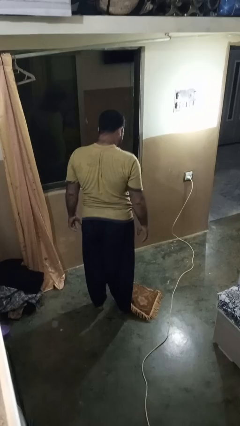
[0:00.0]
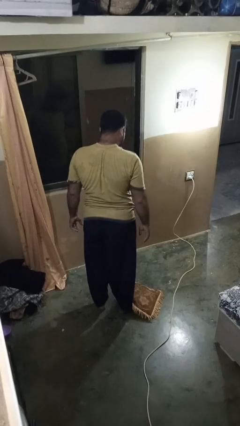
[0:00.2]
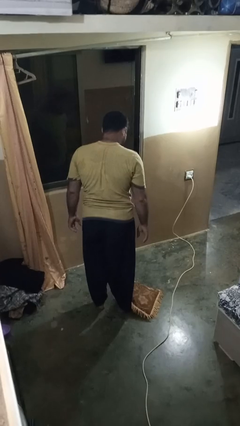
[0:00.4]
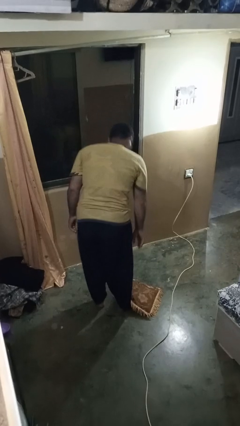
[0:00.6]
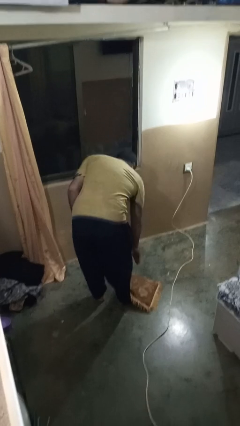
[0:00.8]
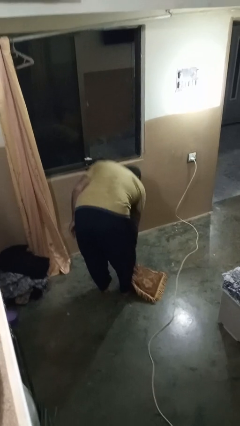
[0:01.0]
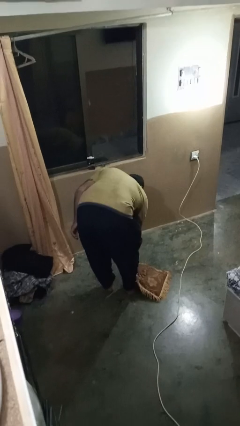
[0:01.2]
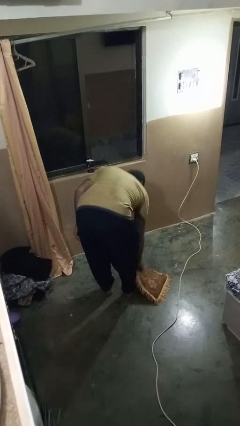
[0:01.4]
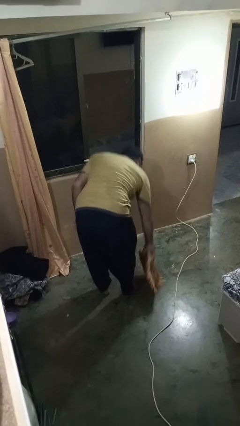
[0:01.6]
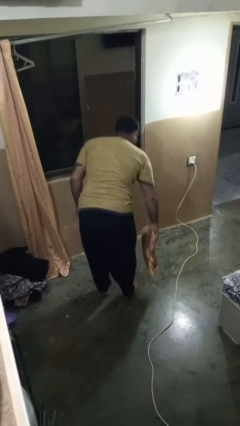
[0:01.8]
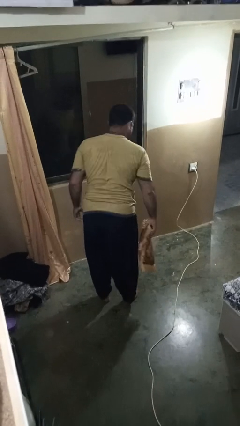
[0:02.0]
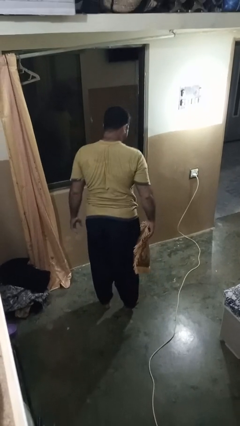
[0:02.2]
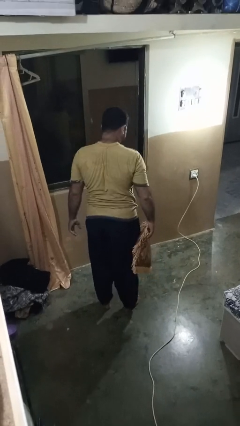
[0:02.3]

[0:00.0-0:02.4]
person picks up object from floor

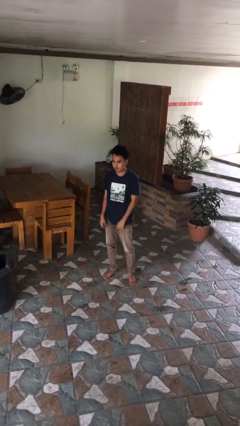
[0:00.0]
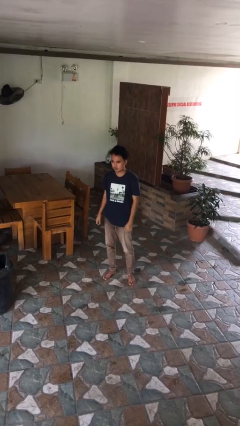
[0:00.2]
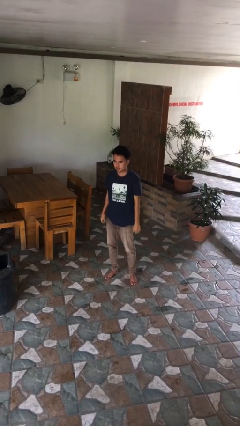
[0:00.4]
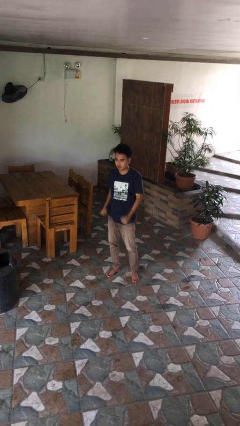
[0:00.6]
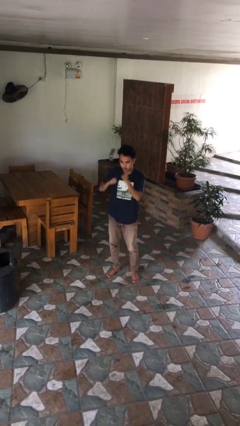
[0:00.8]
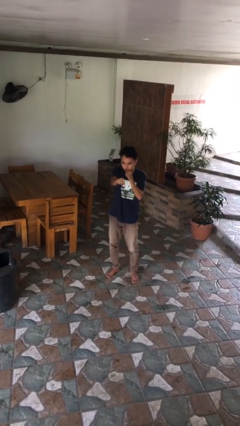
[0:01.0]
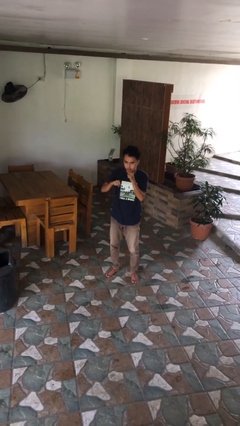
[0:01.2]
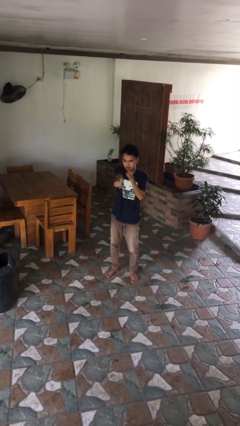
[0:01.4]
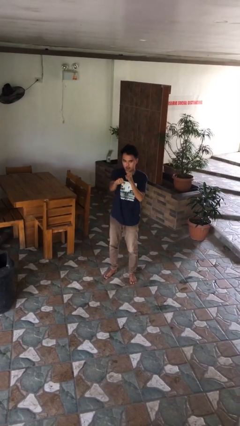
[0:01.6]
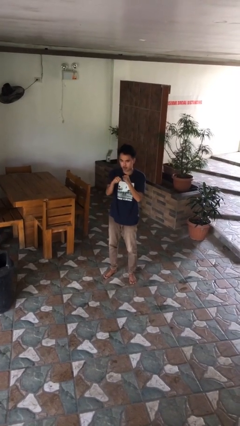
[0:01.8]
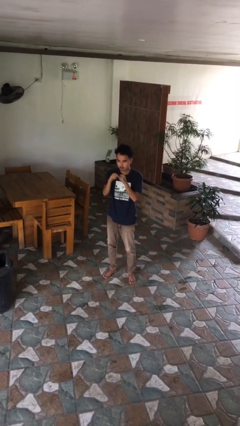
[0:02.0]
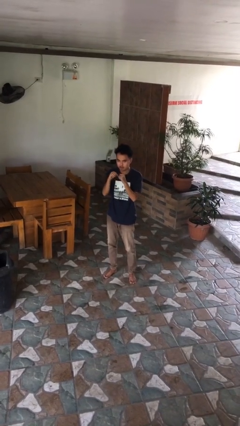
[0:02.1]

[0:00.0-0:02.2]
person punches

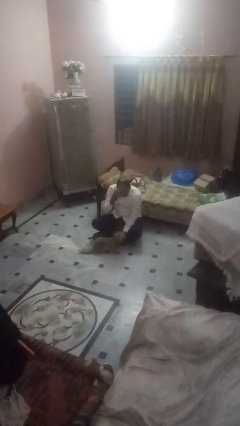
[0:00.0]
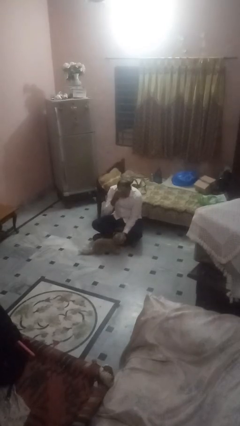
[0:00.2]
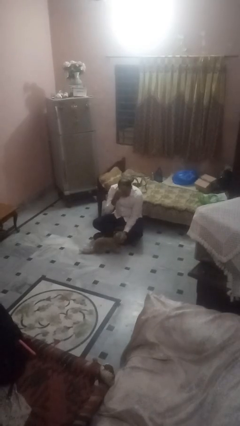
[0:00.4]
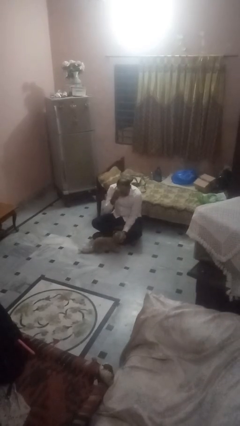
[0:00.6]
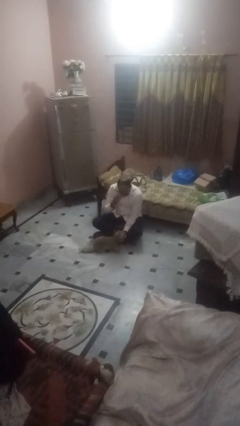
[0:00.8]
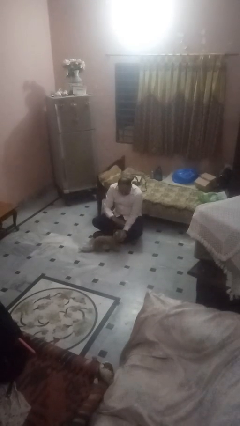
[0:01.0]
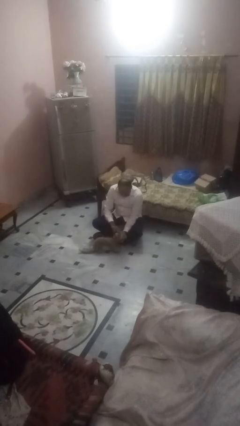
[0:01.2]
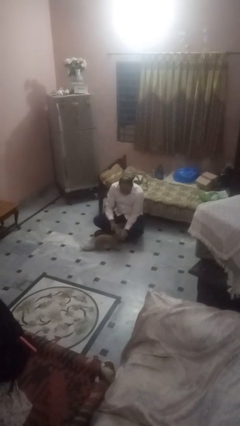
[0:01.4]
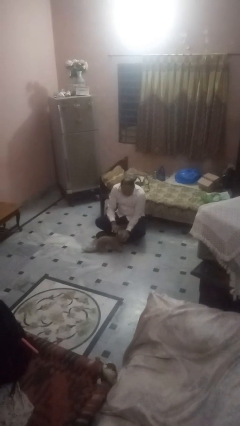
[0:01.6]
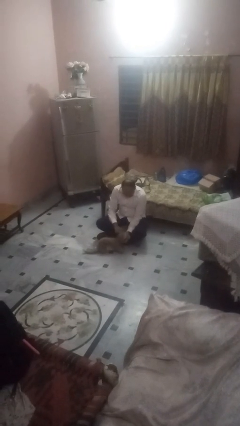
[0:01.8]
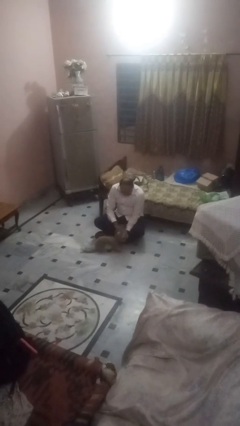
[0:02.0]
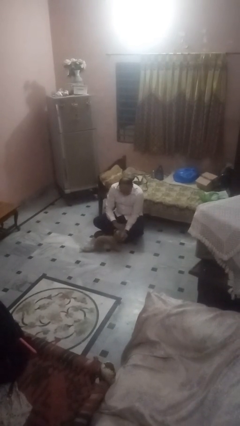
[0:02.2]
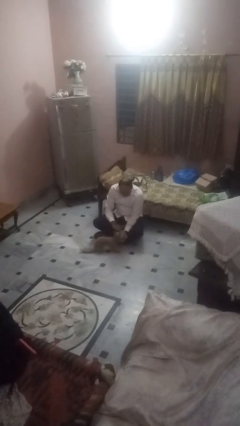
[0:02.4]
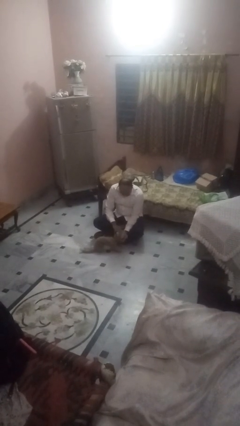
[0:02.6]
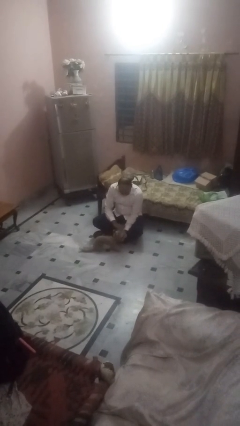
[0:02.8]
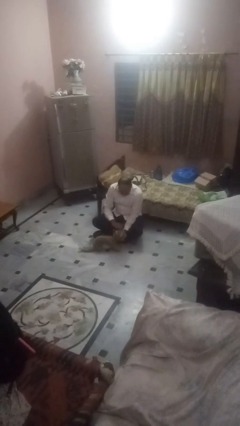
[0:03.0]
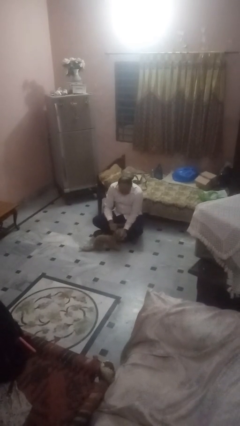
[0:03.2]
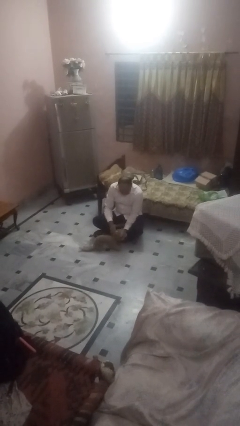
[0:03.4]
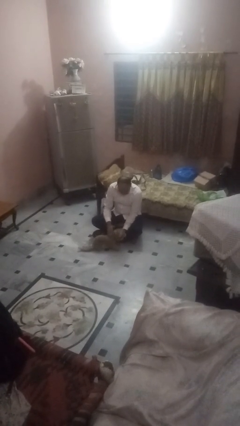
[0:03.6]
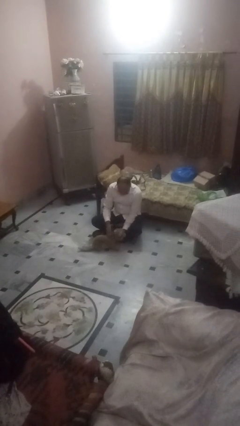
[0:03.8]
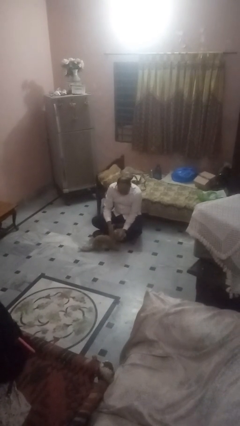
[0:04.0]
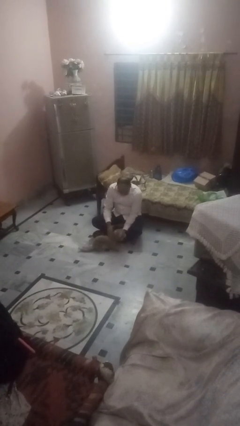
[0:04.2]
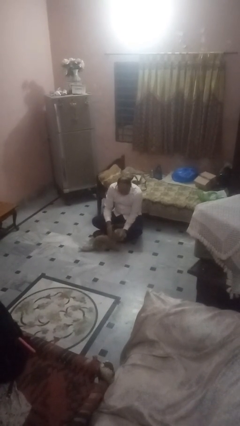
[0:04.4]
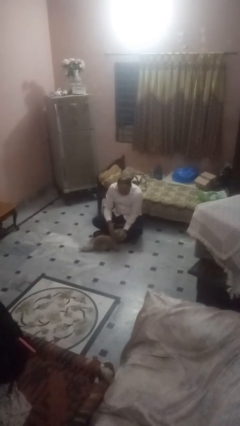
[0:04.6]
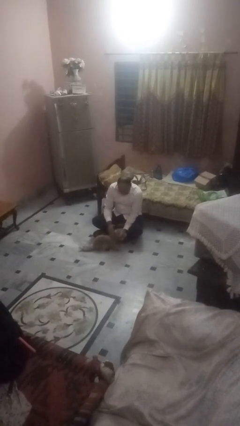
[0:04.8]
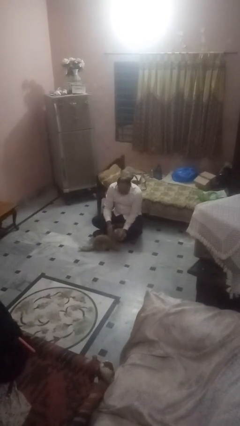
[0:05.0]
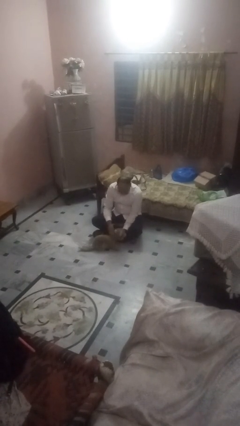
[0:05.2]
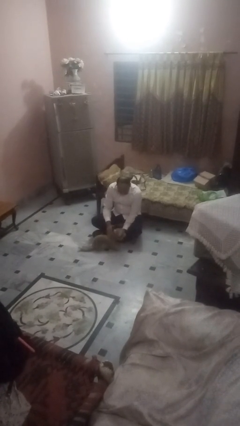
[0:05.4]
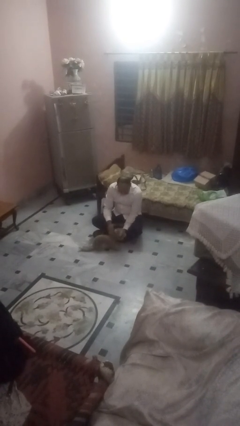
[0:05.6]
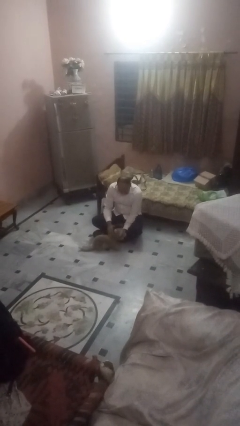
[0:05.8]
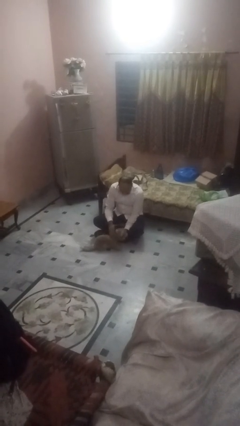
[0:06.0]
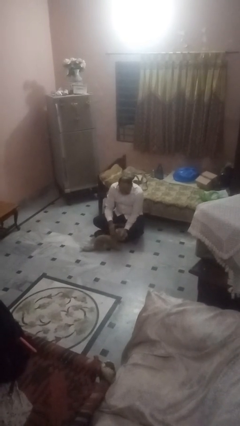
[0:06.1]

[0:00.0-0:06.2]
person pets dog

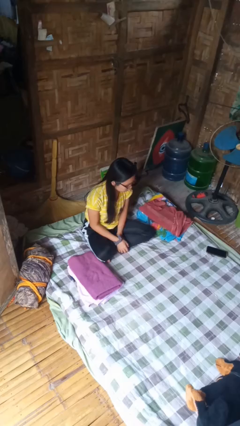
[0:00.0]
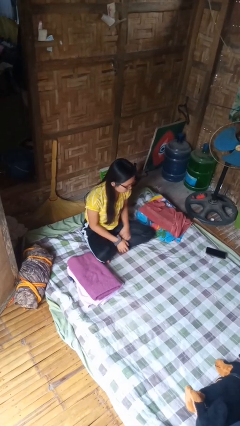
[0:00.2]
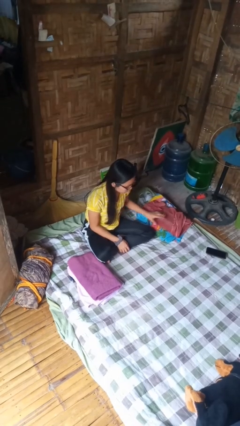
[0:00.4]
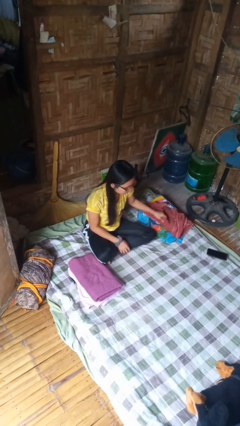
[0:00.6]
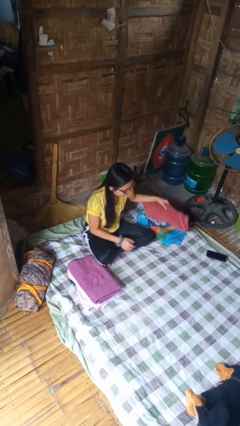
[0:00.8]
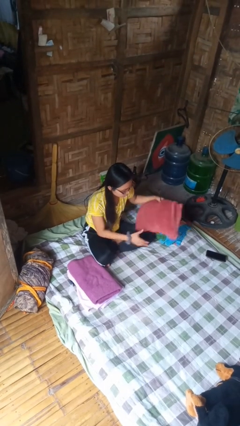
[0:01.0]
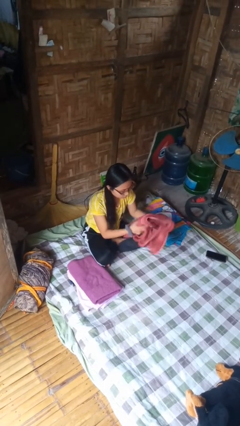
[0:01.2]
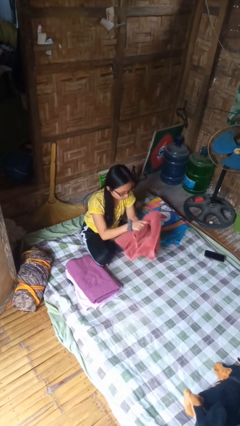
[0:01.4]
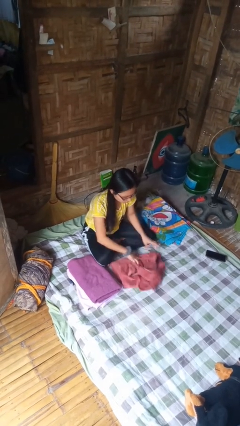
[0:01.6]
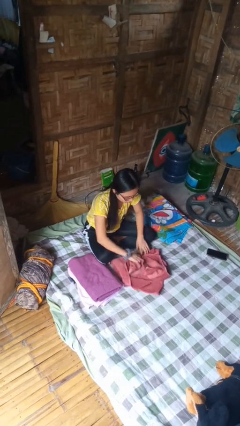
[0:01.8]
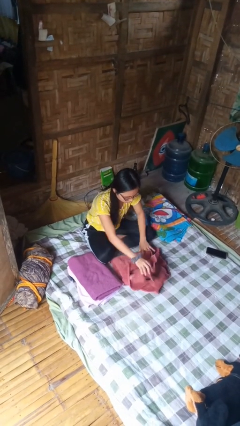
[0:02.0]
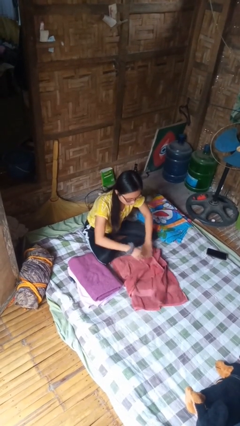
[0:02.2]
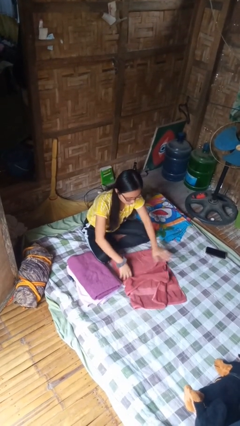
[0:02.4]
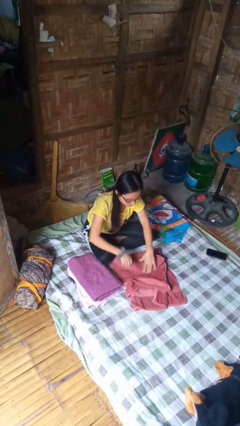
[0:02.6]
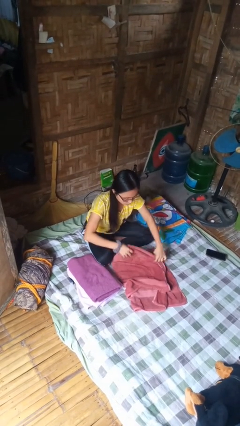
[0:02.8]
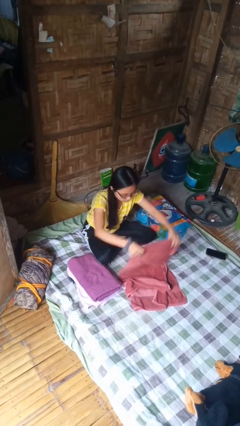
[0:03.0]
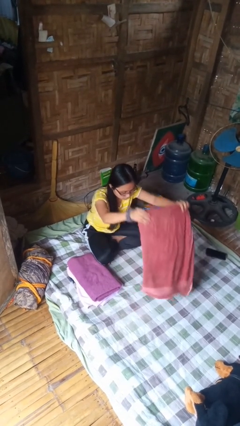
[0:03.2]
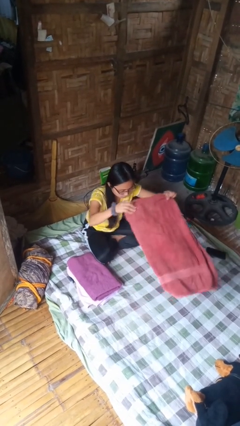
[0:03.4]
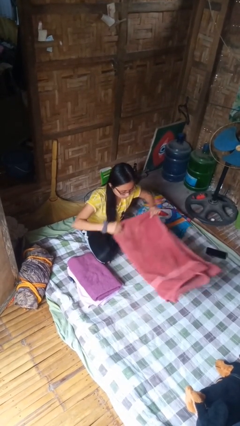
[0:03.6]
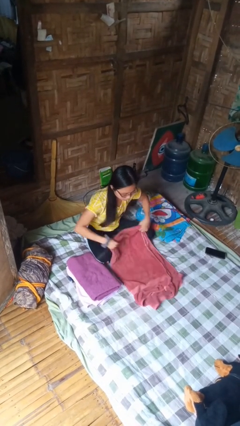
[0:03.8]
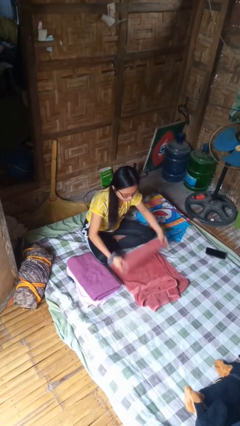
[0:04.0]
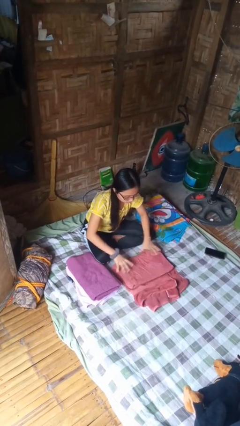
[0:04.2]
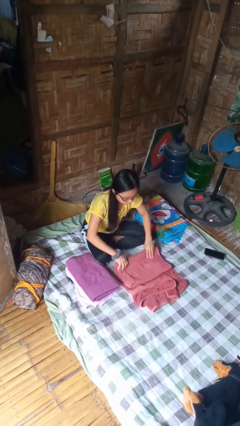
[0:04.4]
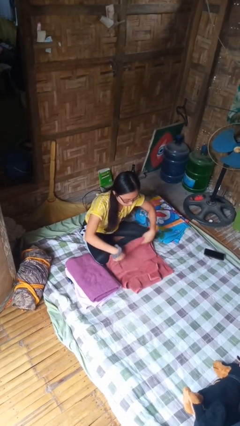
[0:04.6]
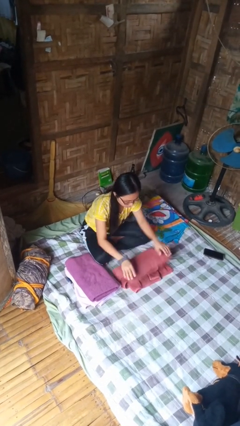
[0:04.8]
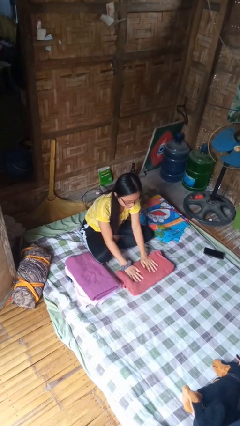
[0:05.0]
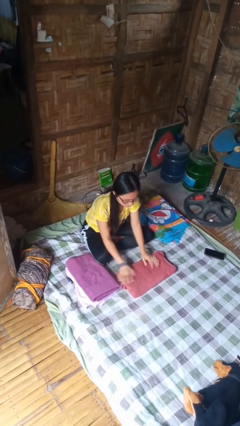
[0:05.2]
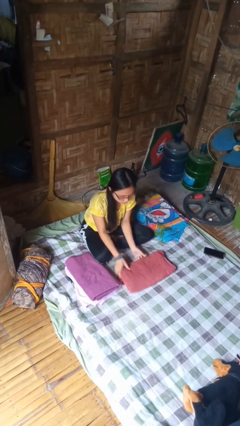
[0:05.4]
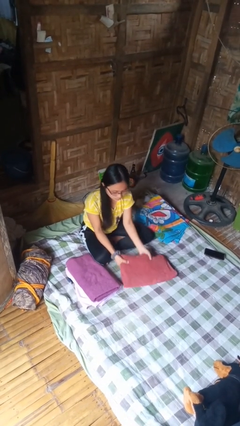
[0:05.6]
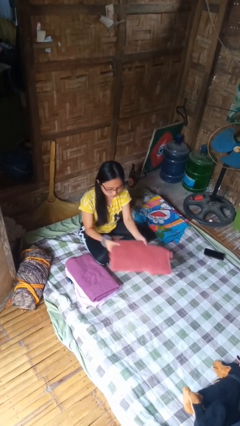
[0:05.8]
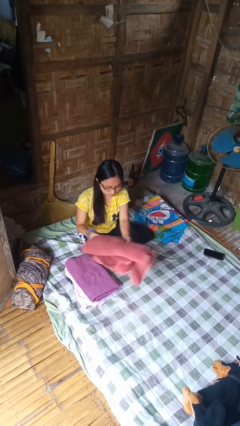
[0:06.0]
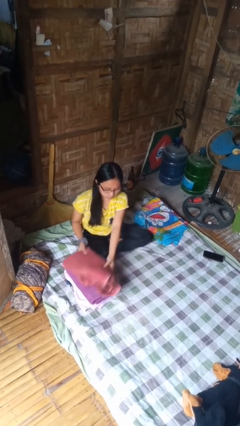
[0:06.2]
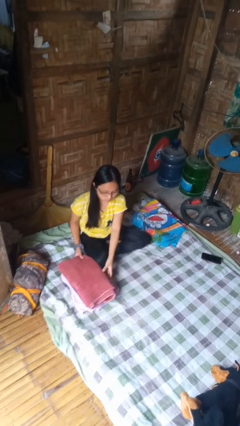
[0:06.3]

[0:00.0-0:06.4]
person folds towel

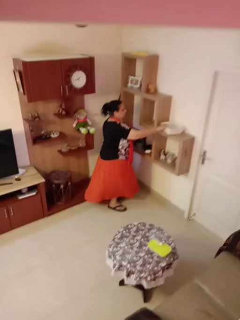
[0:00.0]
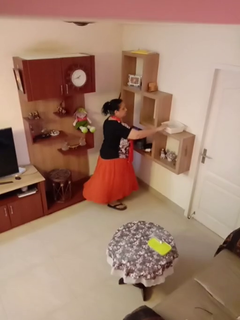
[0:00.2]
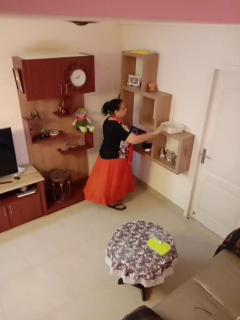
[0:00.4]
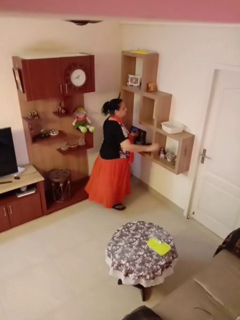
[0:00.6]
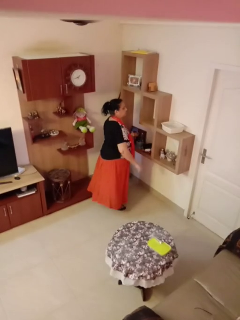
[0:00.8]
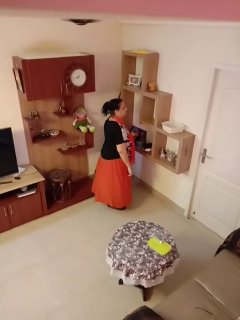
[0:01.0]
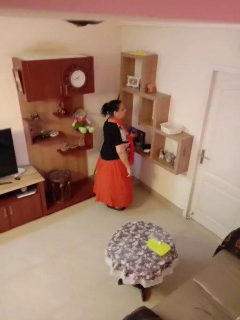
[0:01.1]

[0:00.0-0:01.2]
person puts down object on shelf
